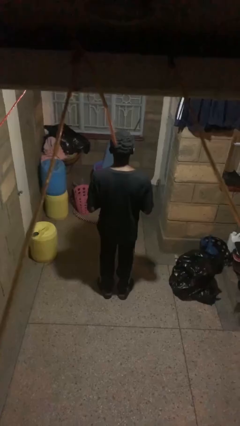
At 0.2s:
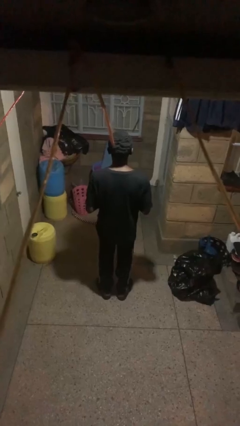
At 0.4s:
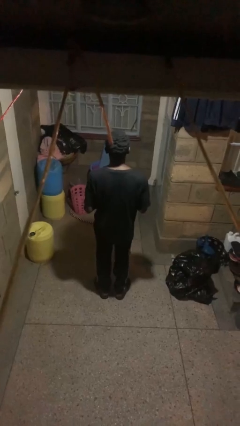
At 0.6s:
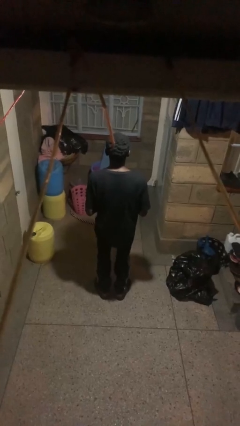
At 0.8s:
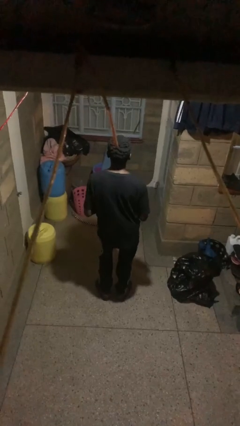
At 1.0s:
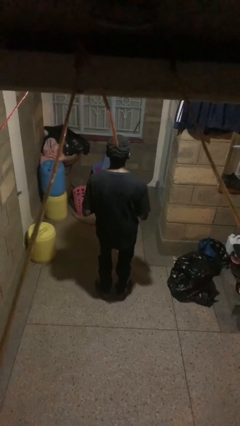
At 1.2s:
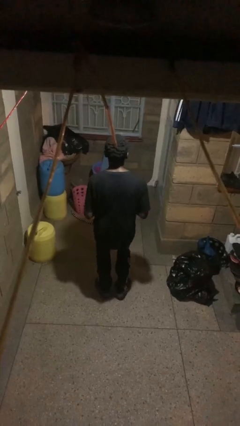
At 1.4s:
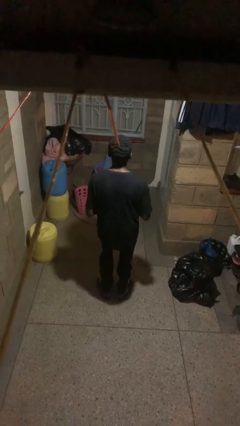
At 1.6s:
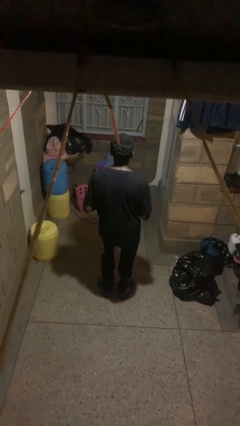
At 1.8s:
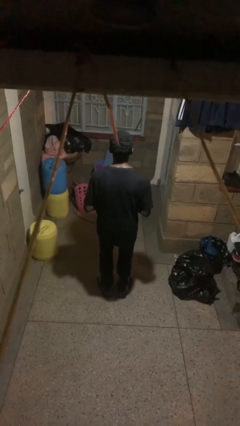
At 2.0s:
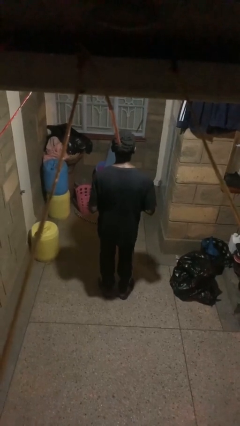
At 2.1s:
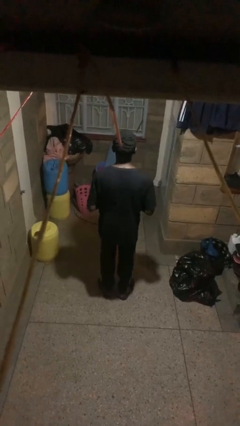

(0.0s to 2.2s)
person wiggles hips

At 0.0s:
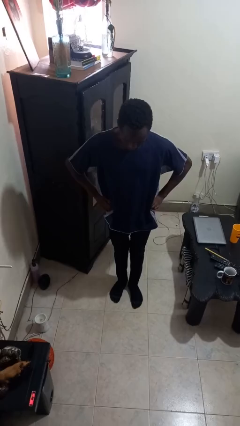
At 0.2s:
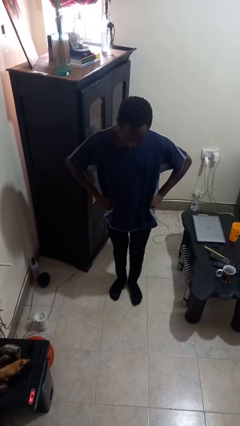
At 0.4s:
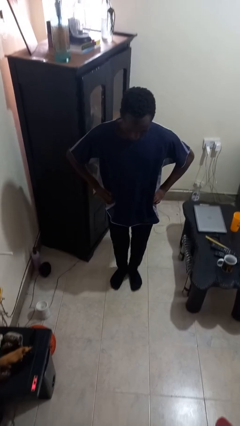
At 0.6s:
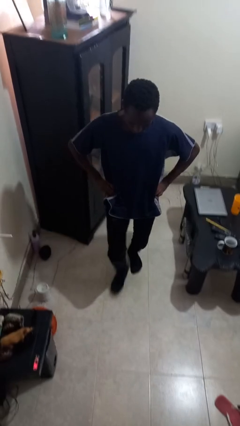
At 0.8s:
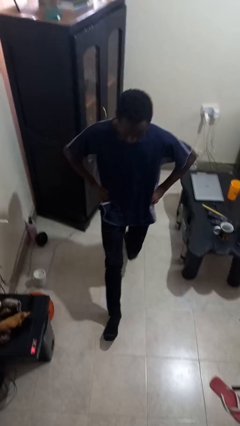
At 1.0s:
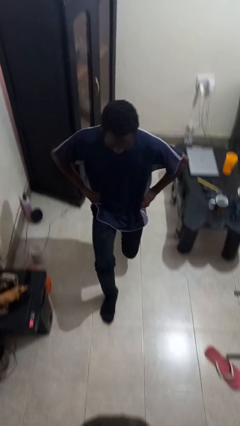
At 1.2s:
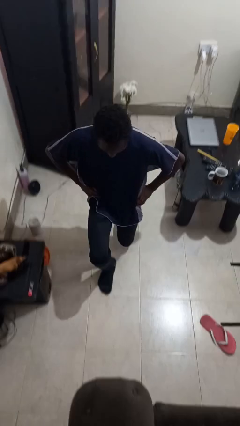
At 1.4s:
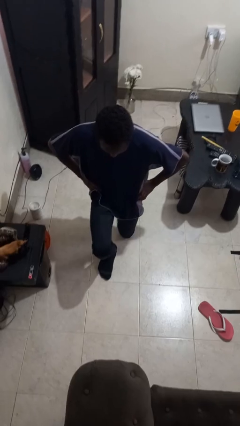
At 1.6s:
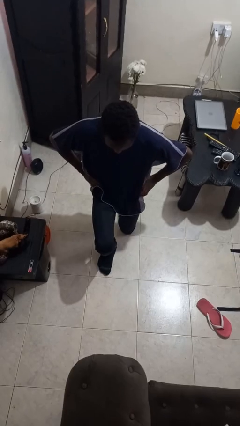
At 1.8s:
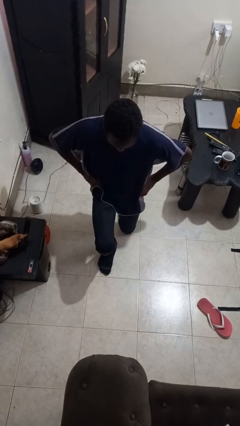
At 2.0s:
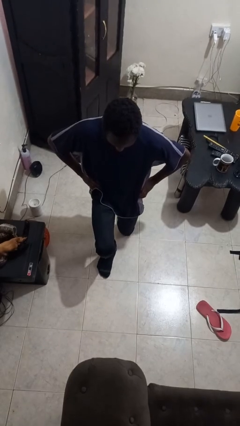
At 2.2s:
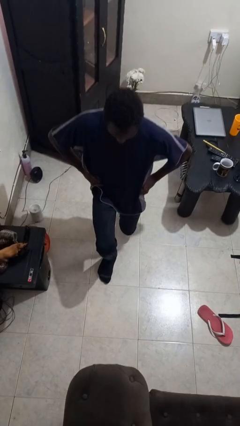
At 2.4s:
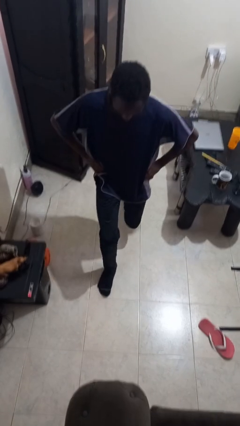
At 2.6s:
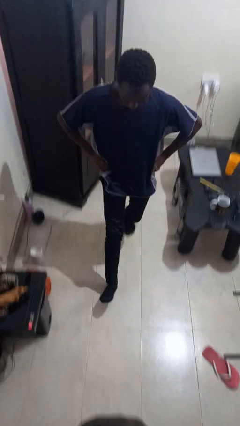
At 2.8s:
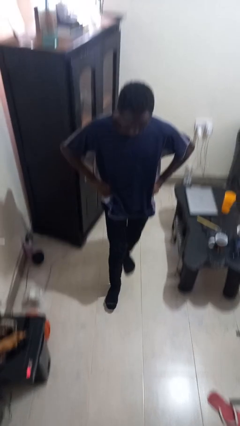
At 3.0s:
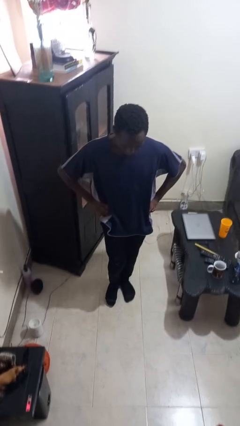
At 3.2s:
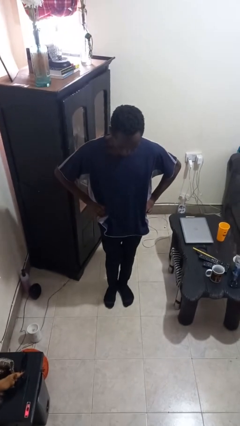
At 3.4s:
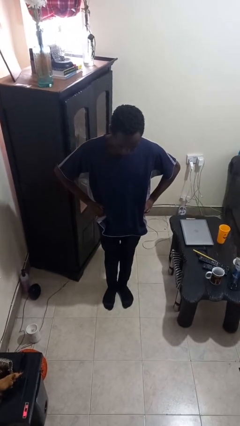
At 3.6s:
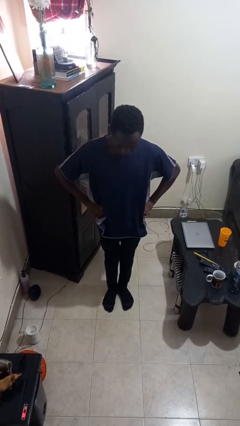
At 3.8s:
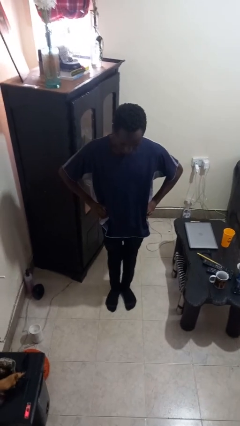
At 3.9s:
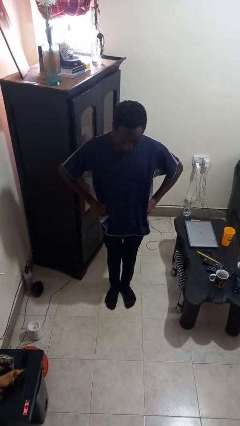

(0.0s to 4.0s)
person exercises with lunges

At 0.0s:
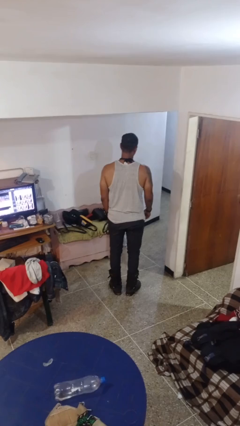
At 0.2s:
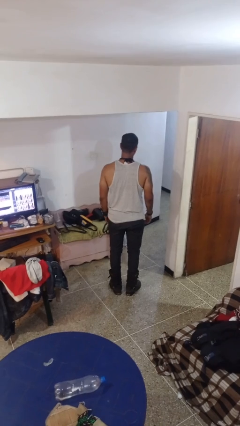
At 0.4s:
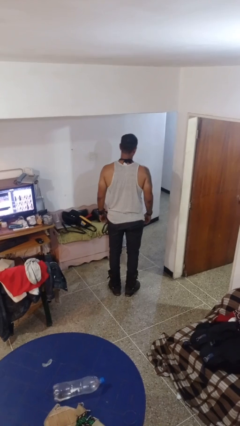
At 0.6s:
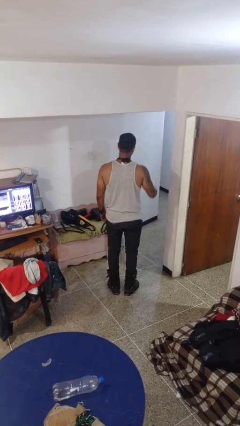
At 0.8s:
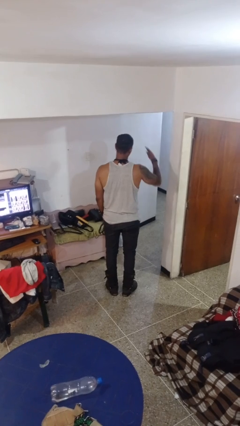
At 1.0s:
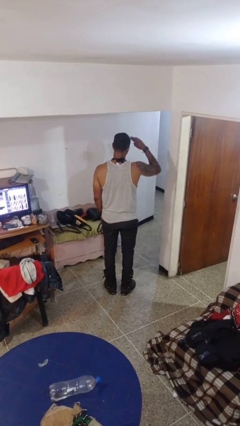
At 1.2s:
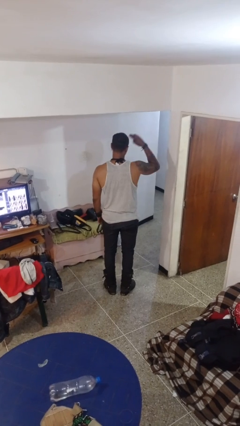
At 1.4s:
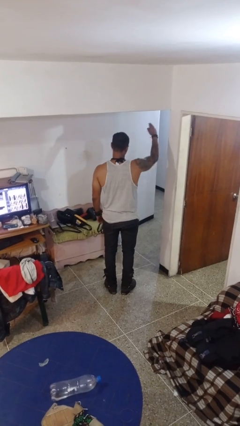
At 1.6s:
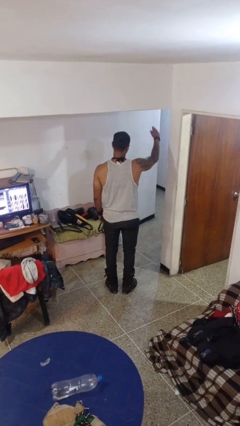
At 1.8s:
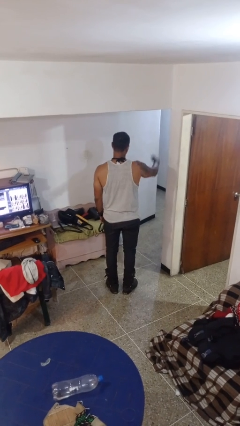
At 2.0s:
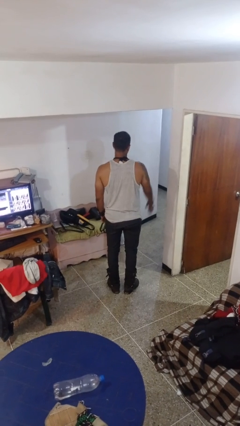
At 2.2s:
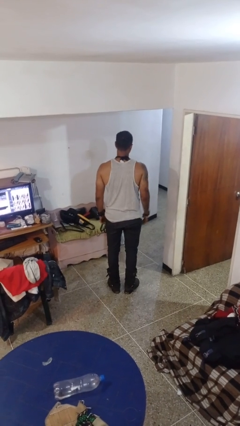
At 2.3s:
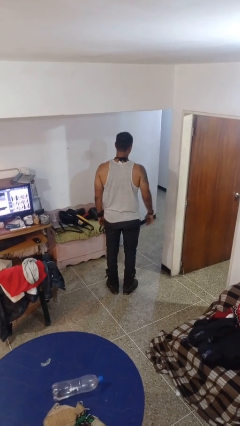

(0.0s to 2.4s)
person salutes

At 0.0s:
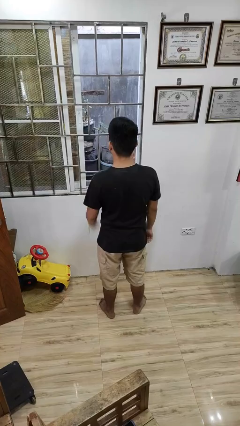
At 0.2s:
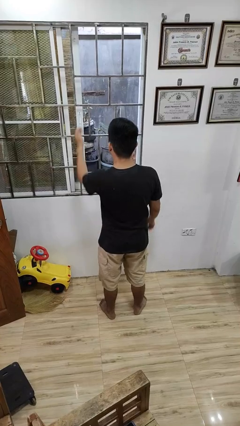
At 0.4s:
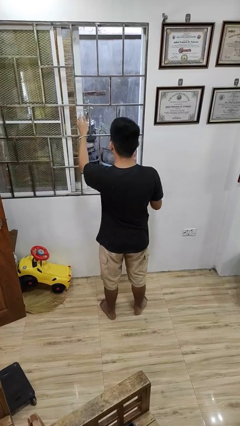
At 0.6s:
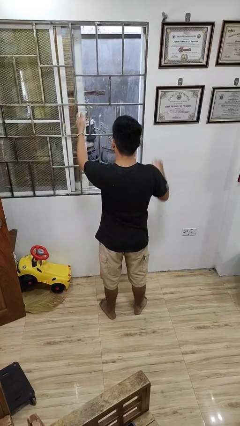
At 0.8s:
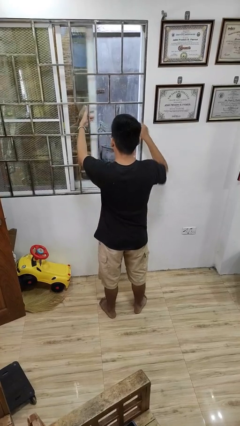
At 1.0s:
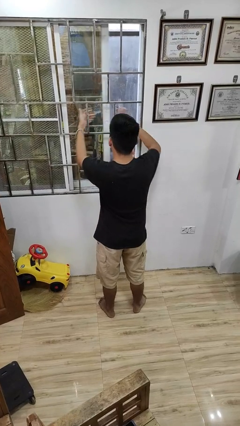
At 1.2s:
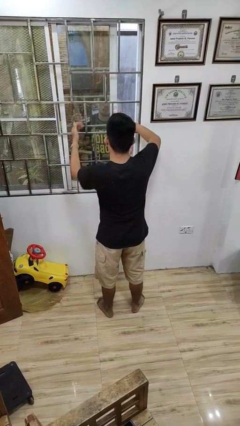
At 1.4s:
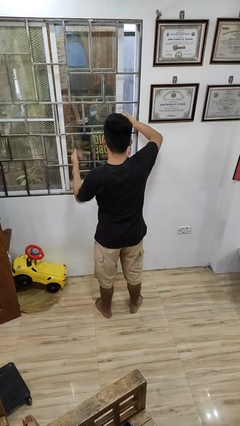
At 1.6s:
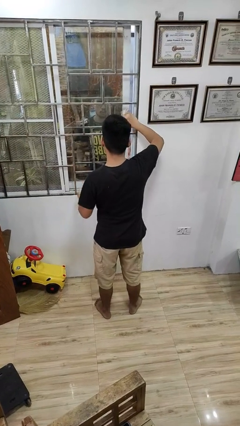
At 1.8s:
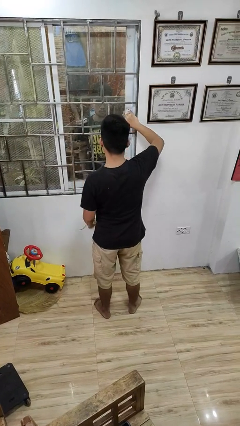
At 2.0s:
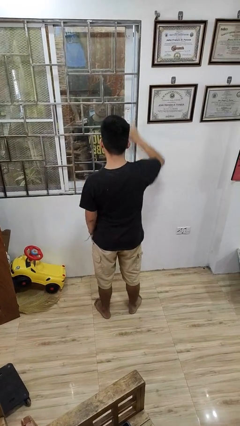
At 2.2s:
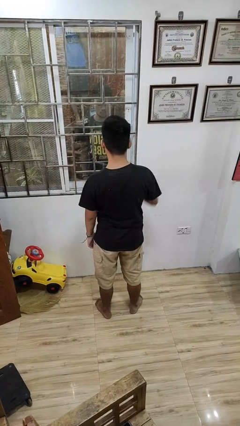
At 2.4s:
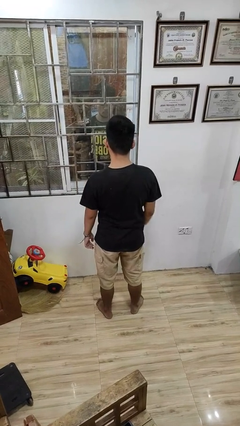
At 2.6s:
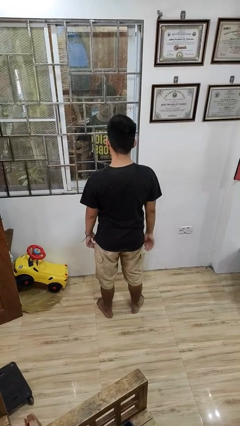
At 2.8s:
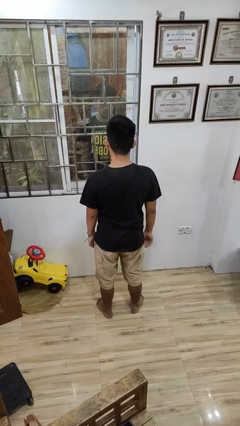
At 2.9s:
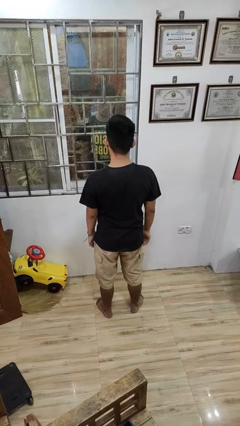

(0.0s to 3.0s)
person closes home window

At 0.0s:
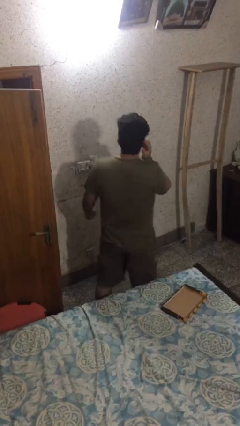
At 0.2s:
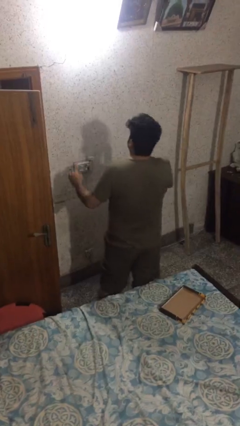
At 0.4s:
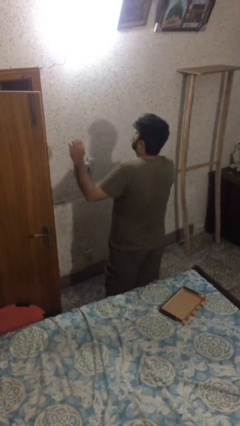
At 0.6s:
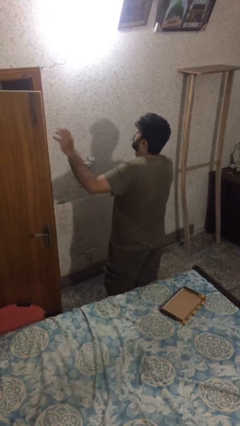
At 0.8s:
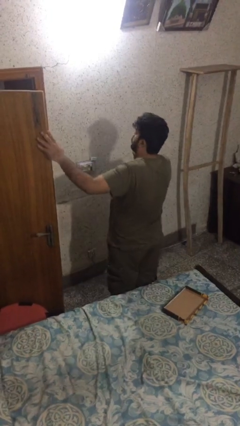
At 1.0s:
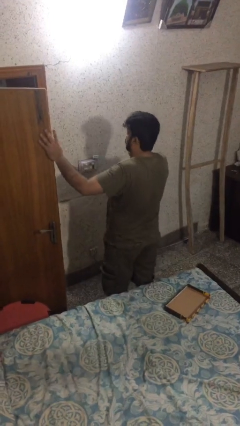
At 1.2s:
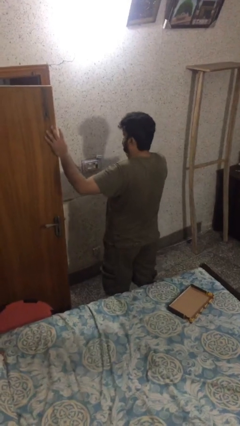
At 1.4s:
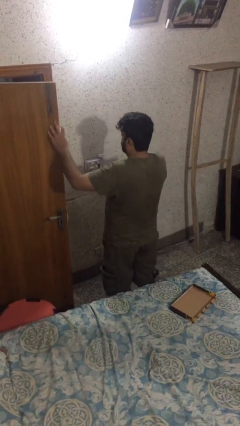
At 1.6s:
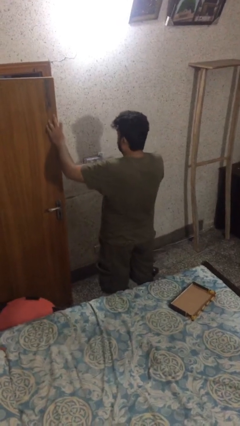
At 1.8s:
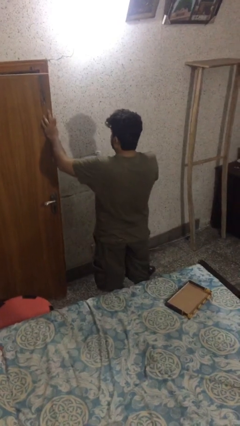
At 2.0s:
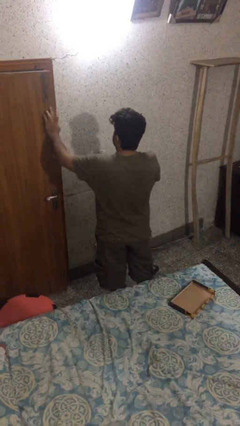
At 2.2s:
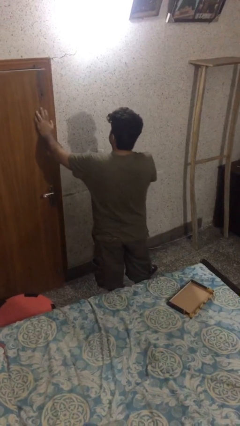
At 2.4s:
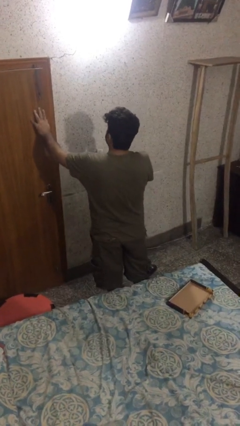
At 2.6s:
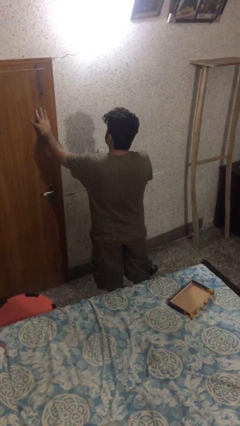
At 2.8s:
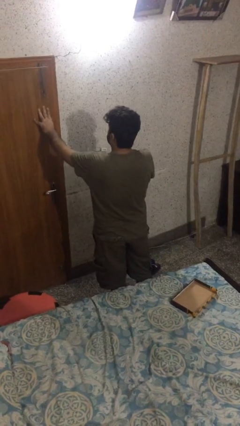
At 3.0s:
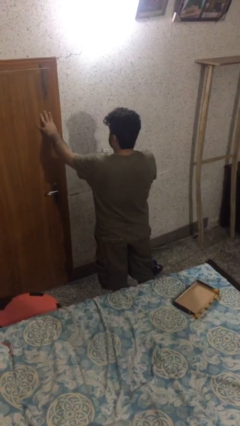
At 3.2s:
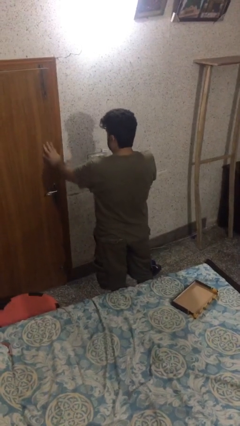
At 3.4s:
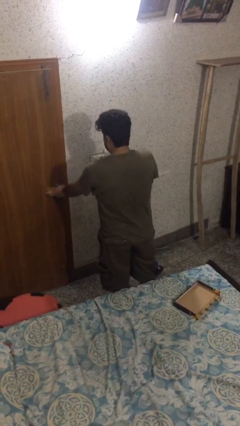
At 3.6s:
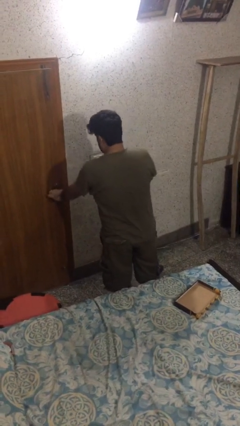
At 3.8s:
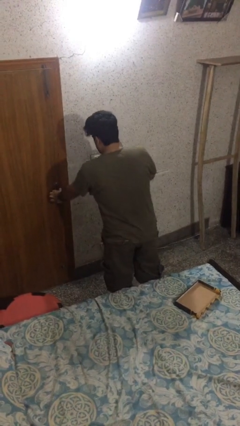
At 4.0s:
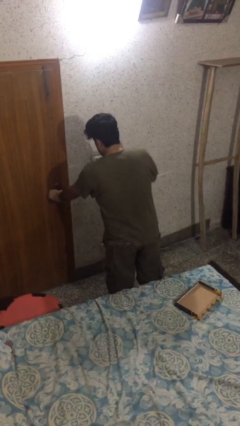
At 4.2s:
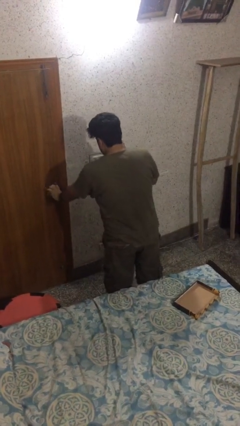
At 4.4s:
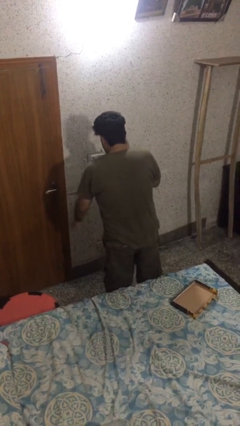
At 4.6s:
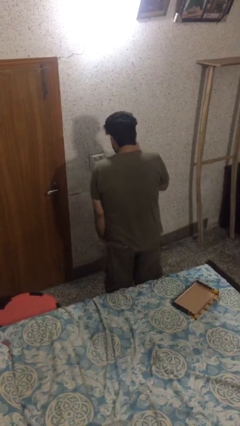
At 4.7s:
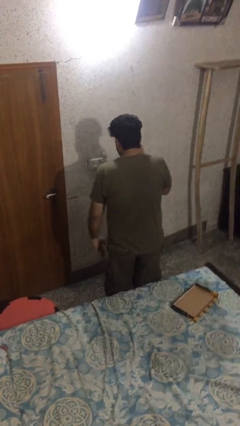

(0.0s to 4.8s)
person closes facility door

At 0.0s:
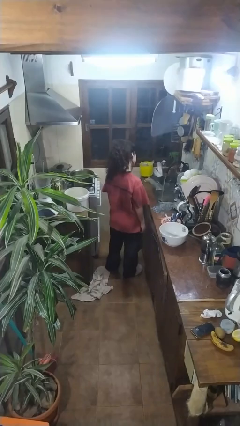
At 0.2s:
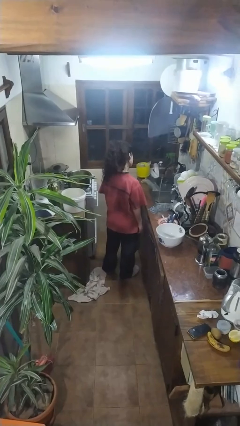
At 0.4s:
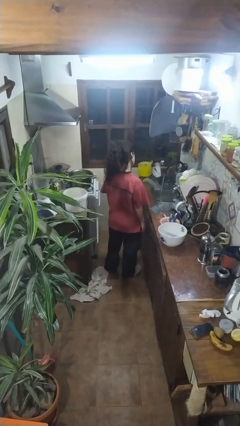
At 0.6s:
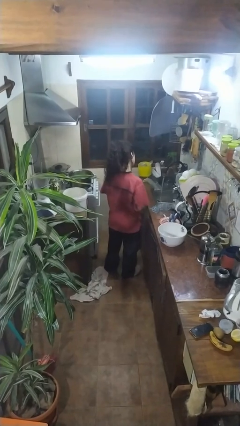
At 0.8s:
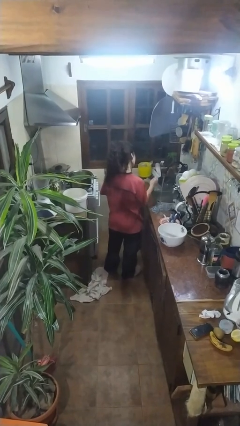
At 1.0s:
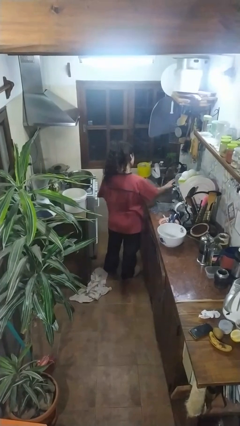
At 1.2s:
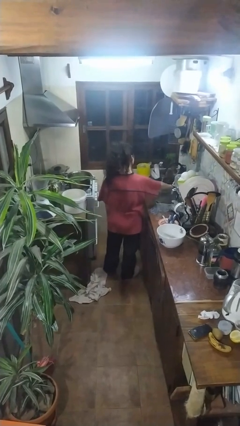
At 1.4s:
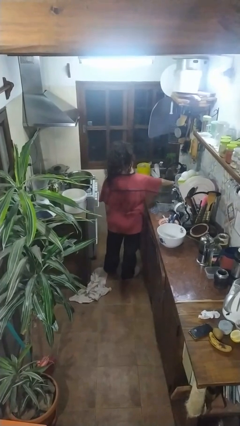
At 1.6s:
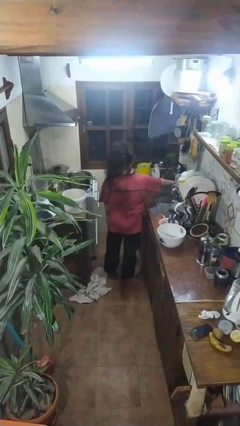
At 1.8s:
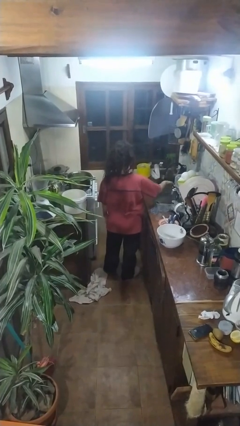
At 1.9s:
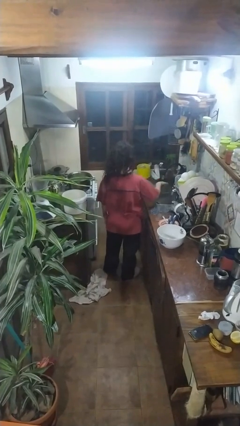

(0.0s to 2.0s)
person turns off faucet
